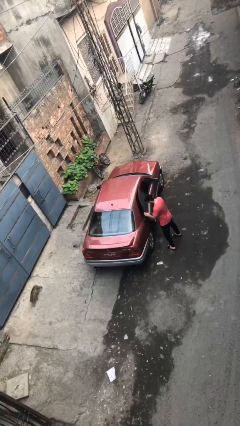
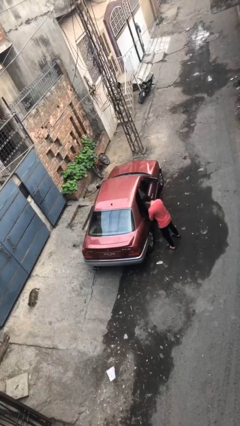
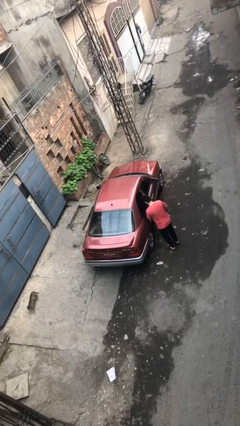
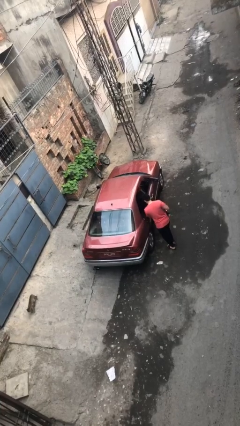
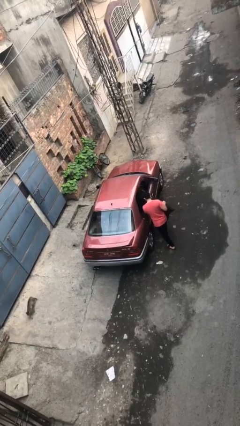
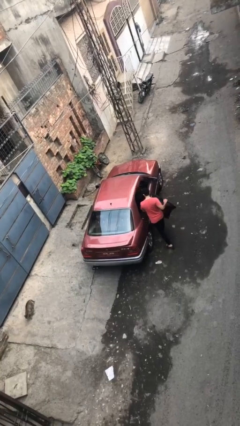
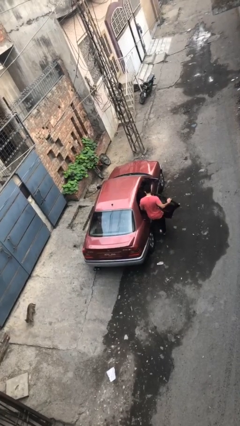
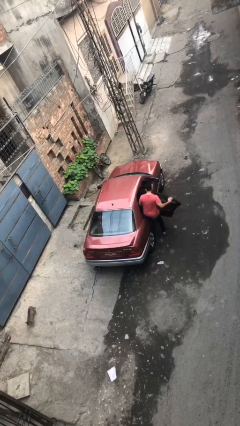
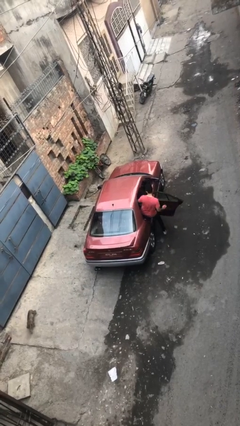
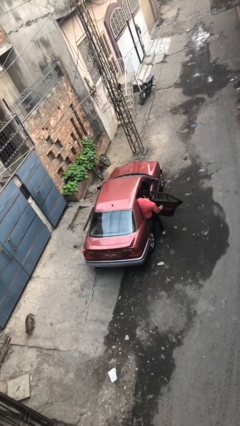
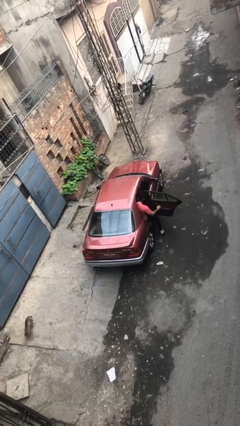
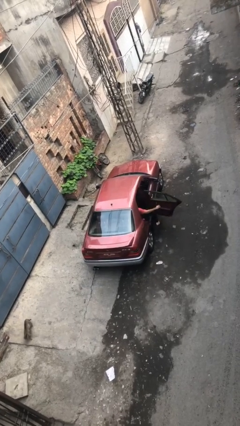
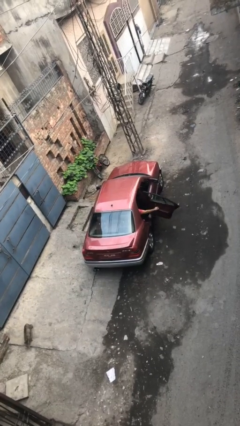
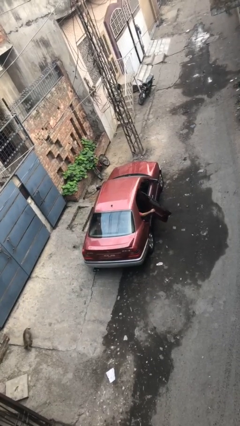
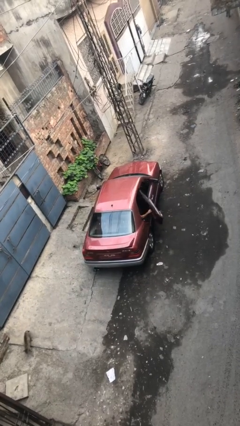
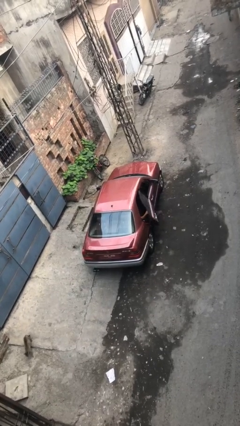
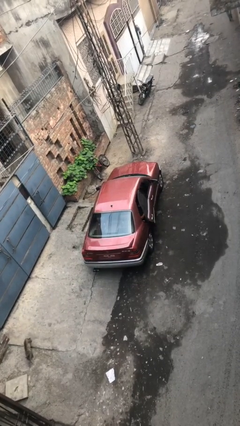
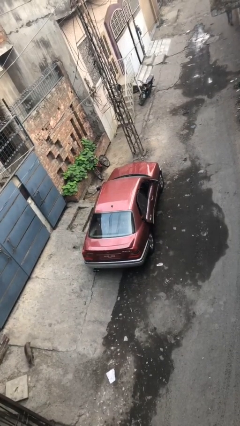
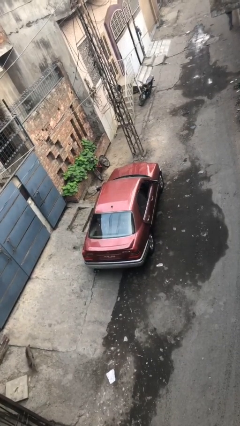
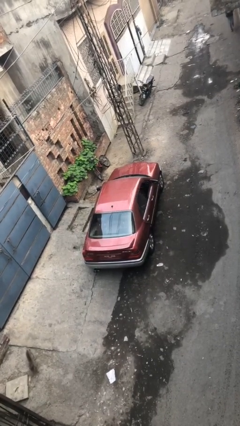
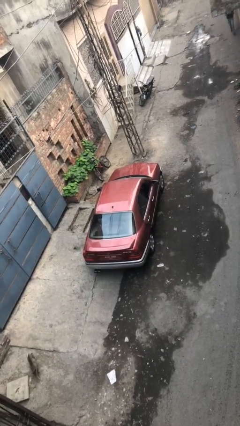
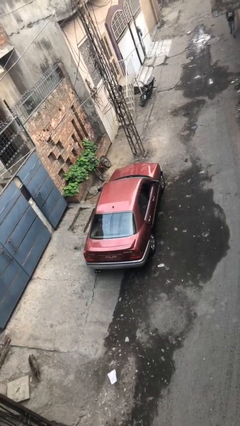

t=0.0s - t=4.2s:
car picks up person

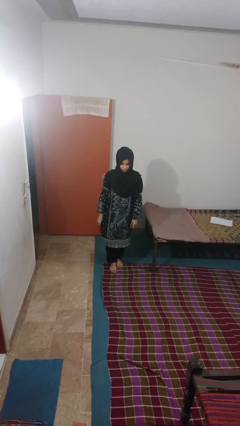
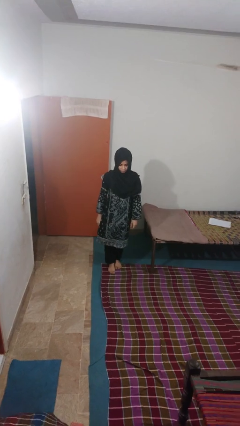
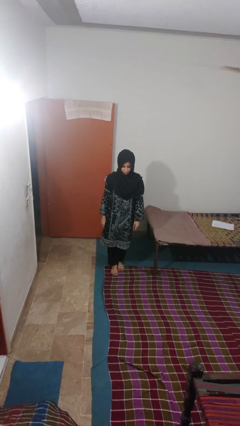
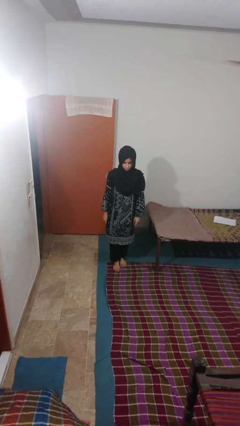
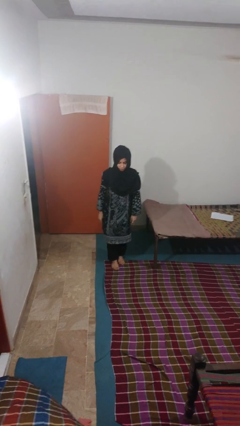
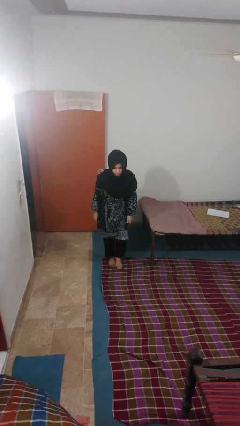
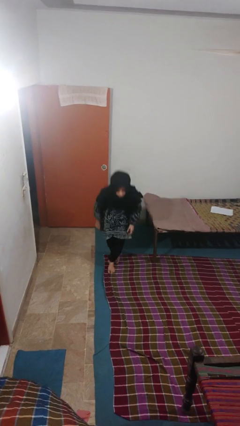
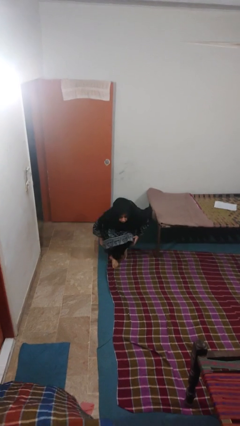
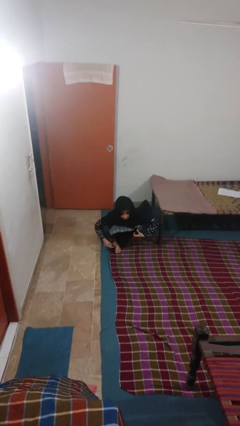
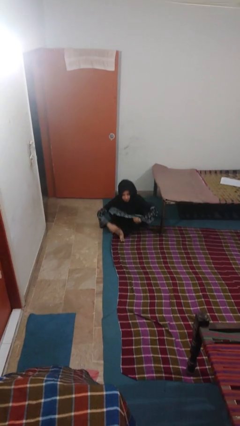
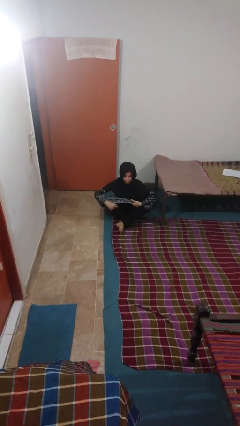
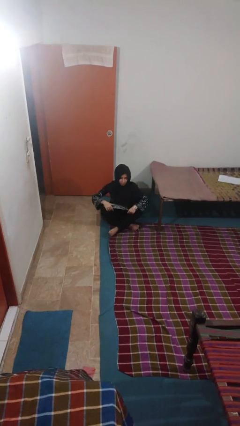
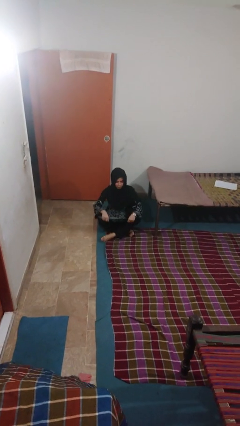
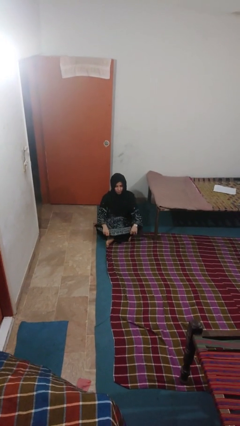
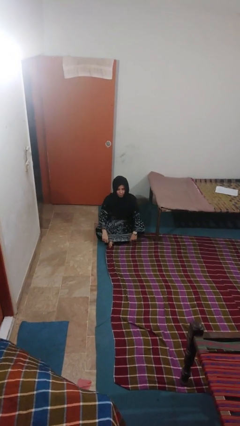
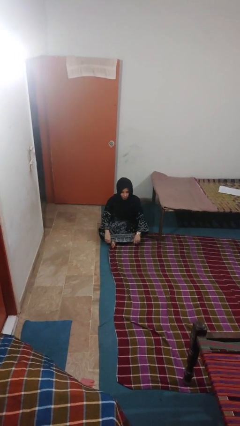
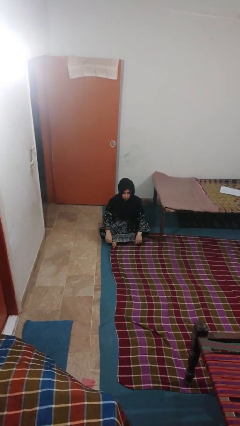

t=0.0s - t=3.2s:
person sits crisscross

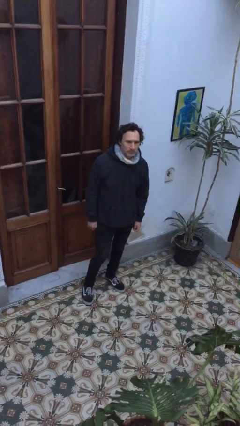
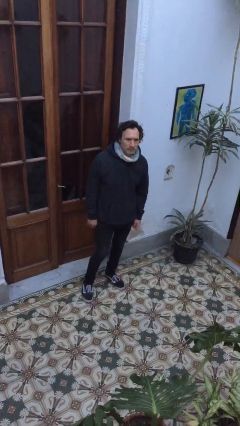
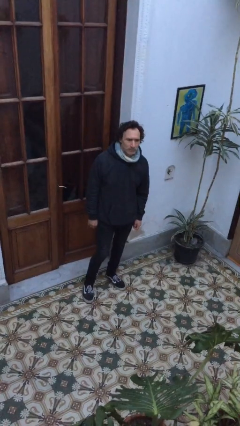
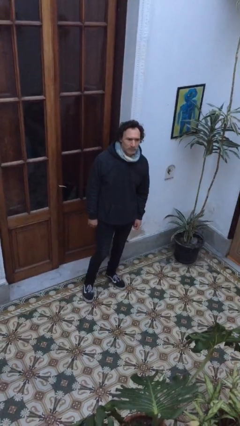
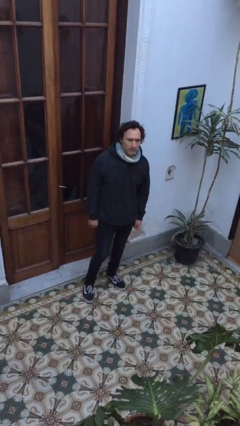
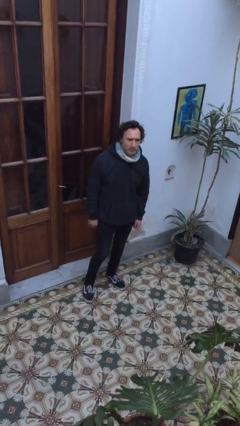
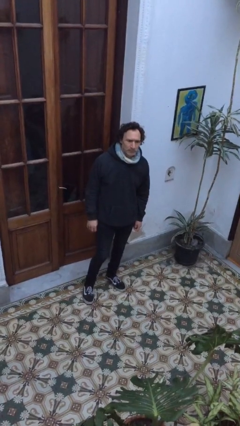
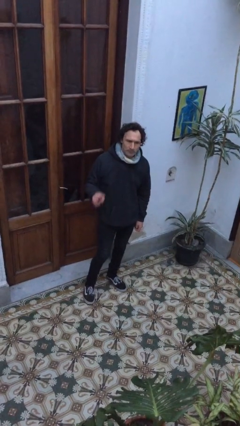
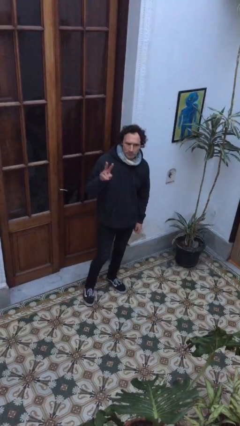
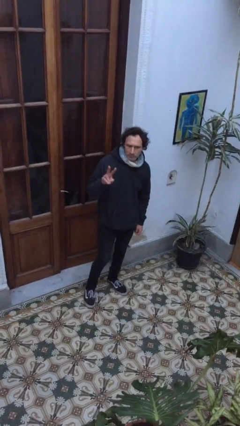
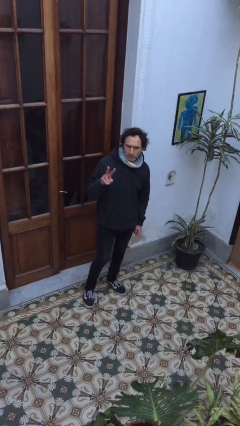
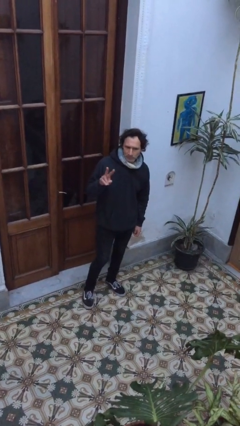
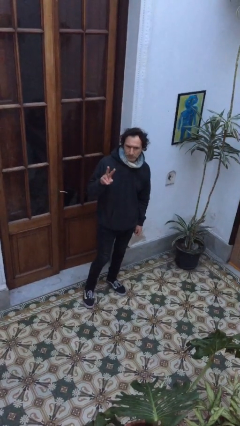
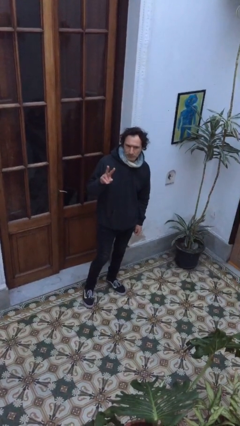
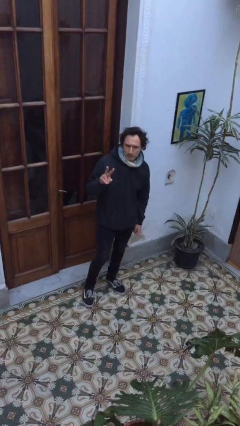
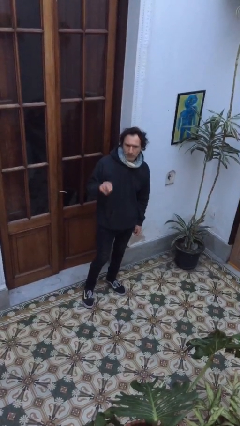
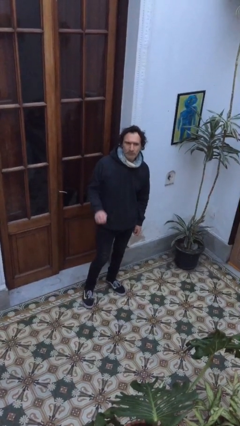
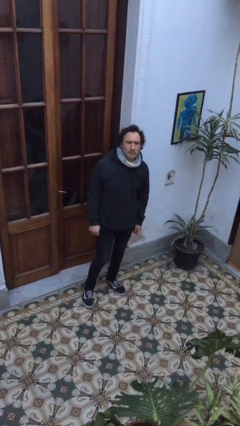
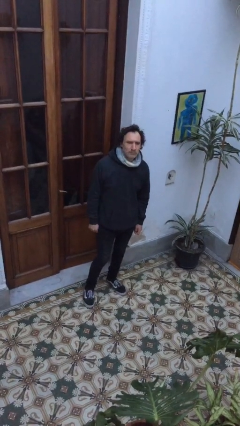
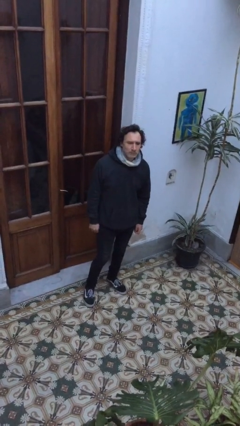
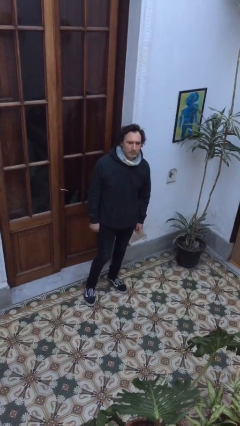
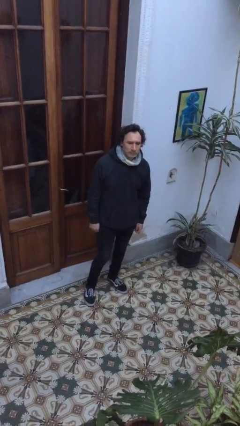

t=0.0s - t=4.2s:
person gestures peace

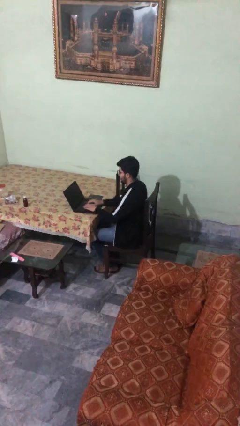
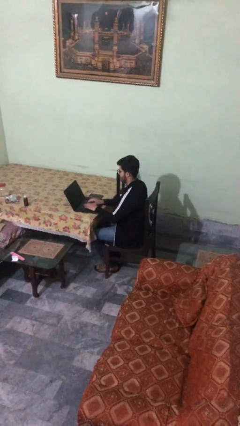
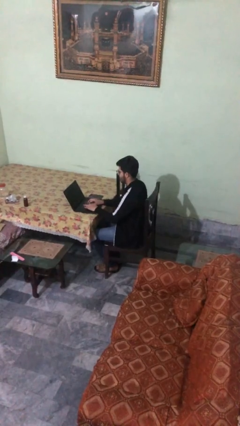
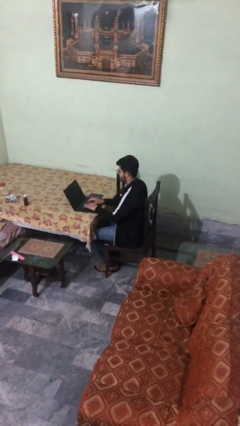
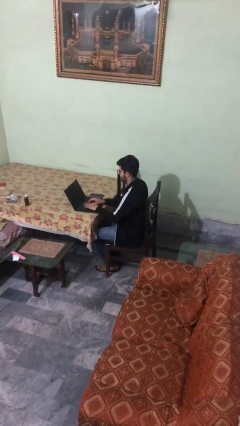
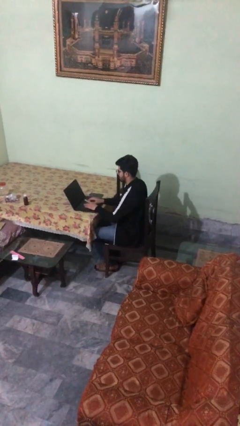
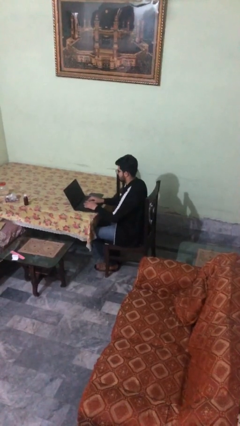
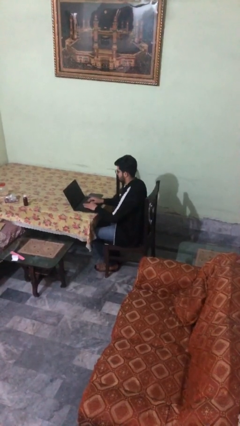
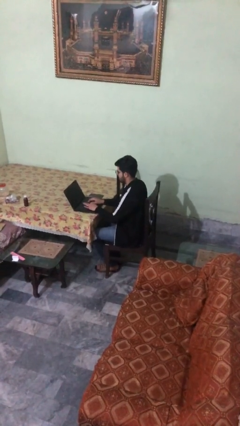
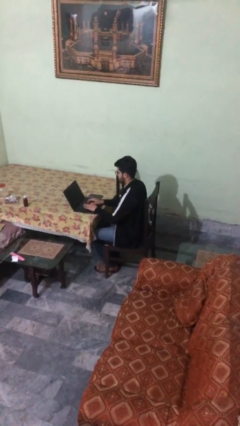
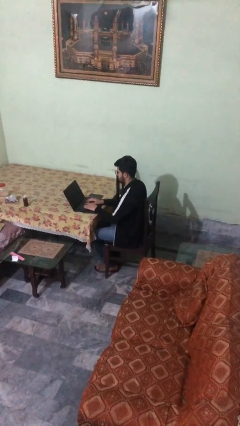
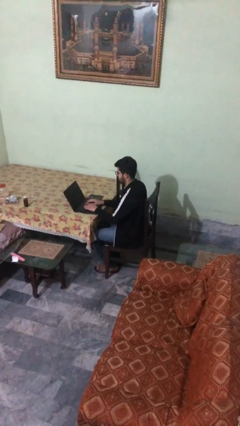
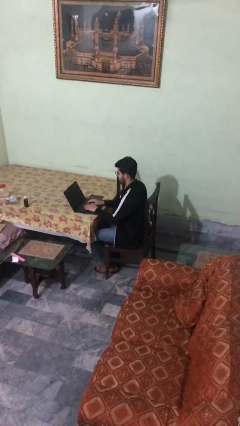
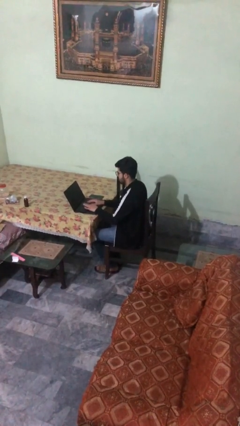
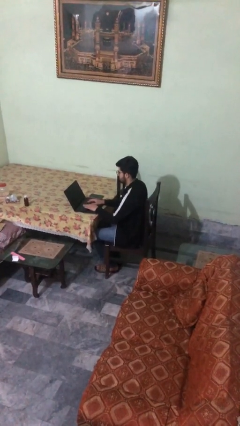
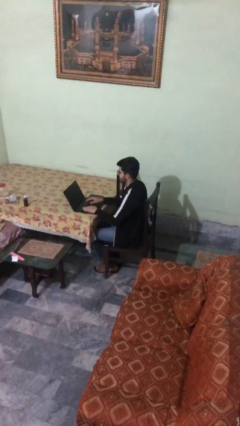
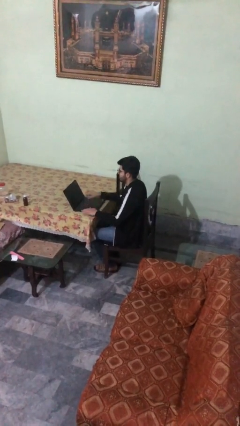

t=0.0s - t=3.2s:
person interacts with laptop

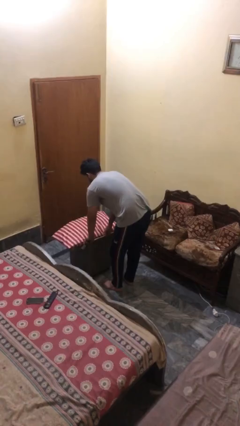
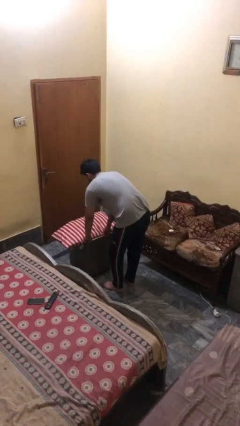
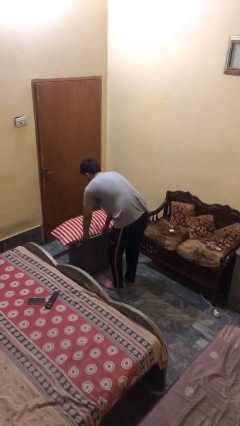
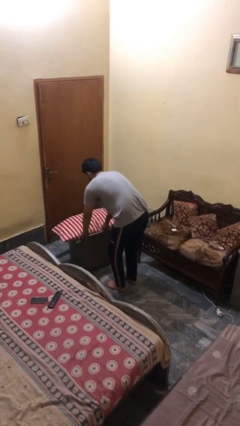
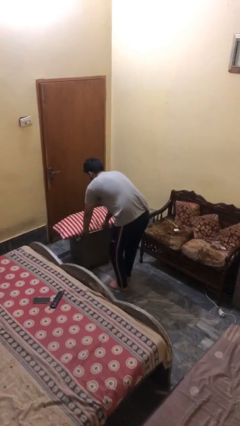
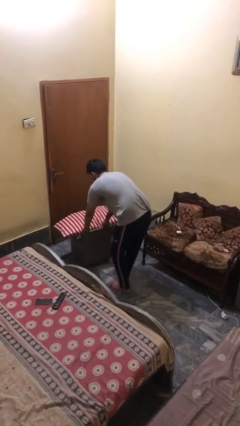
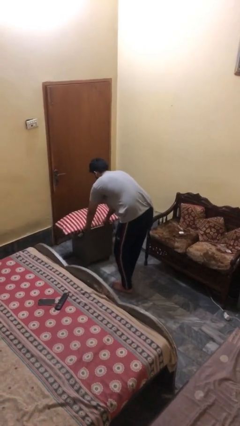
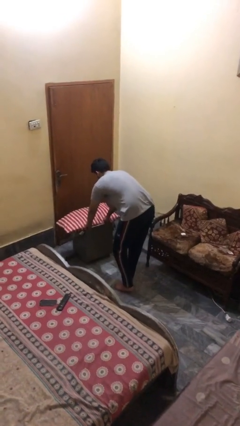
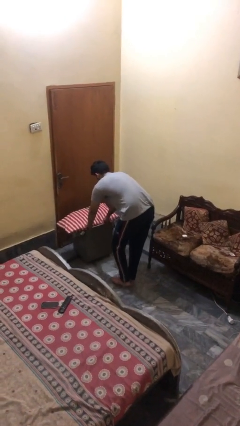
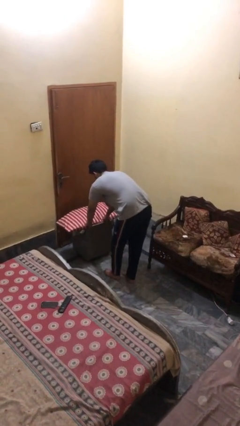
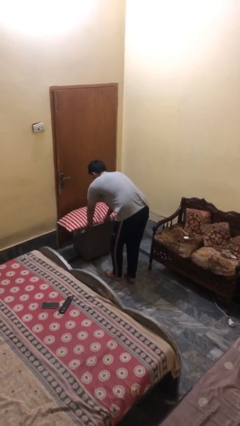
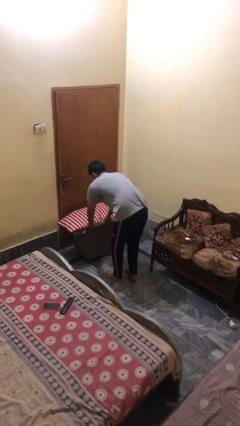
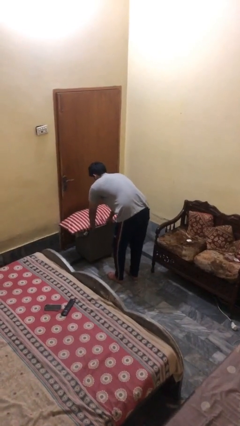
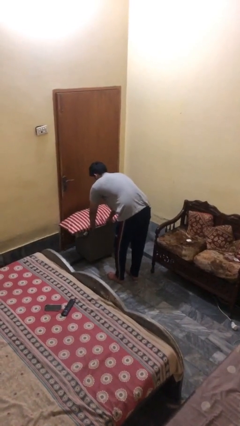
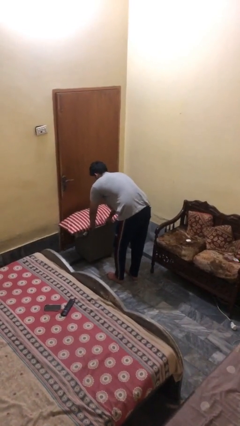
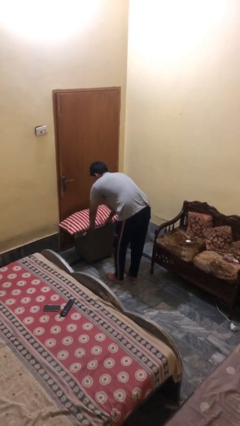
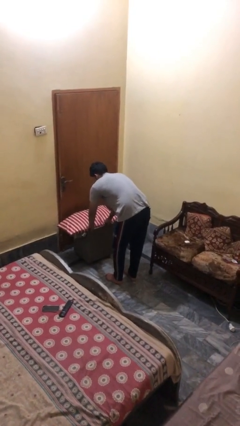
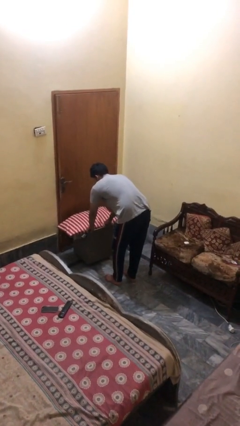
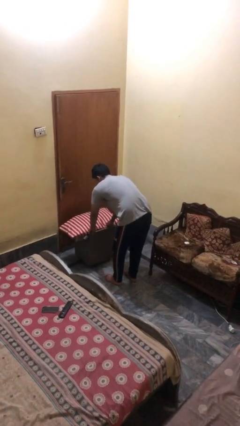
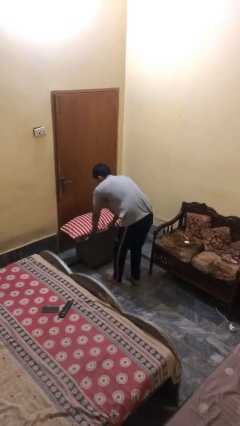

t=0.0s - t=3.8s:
person pushes wheeled cart
